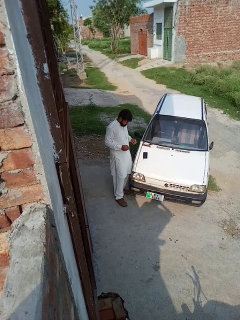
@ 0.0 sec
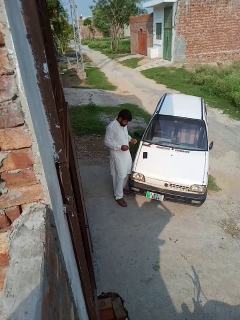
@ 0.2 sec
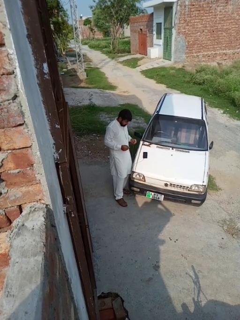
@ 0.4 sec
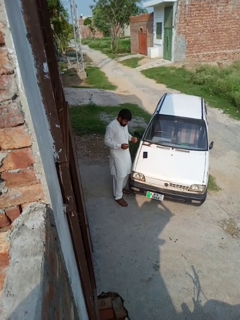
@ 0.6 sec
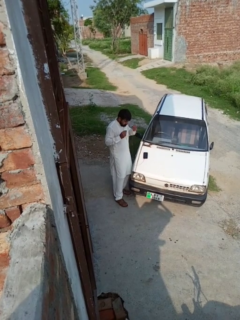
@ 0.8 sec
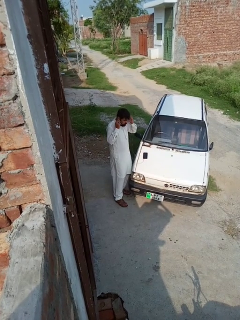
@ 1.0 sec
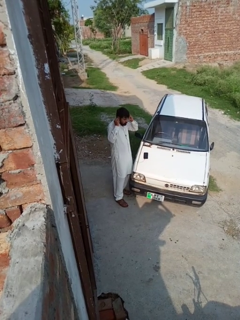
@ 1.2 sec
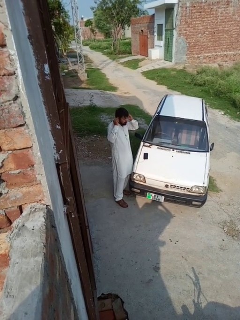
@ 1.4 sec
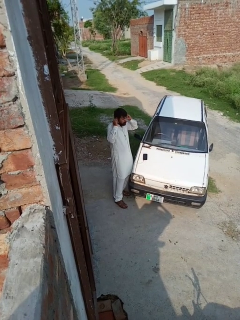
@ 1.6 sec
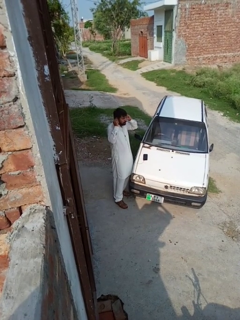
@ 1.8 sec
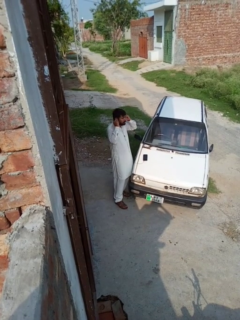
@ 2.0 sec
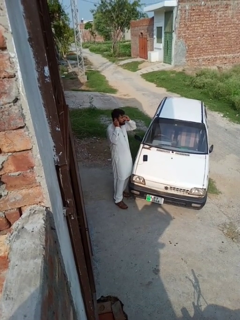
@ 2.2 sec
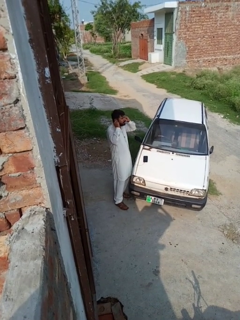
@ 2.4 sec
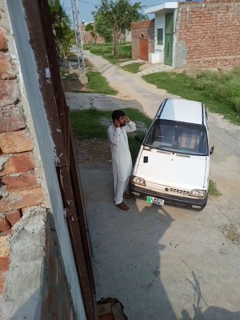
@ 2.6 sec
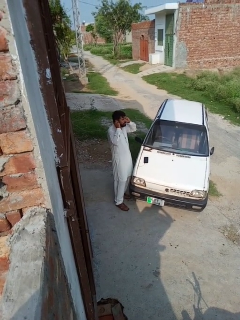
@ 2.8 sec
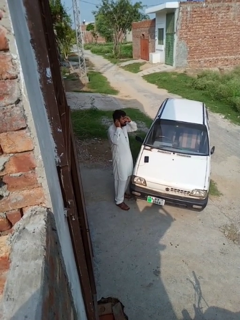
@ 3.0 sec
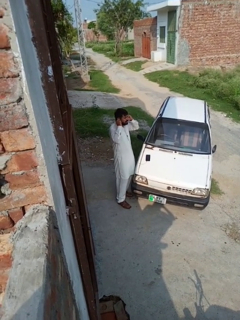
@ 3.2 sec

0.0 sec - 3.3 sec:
person puts on headphones

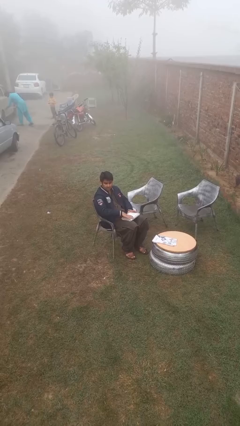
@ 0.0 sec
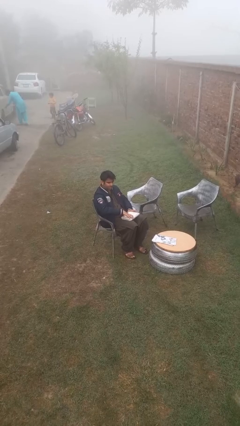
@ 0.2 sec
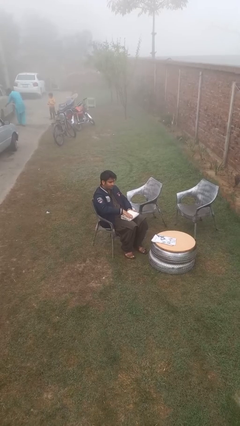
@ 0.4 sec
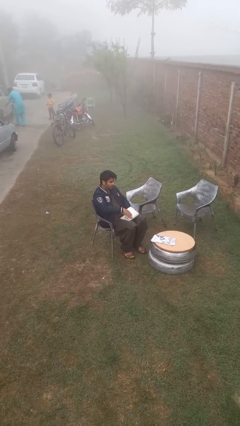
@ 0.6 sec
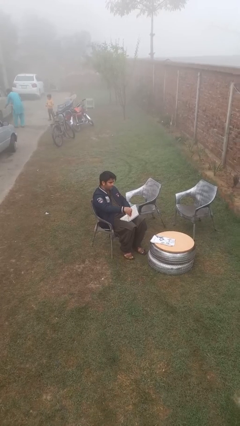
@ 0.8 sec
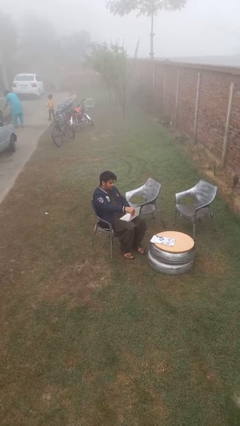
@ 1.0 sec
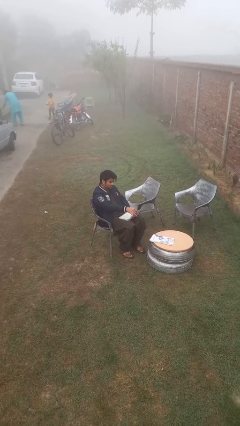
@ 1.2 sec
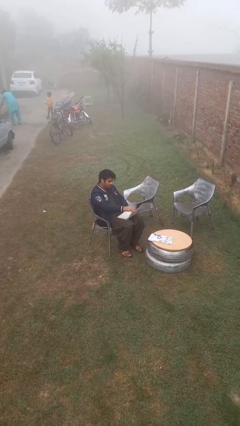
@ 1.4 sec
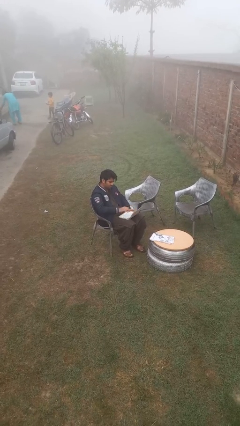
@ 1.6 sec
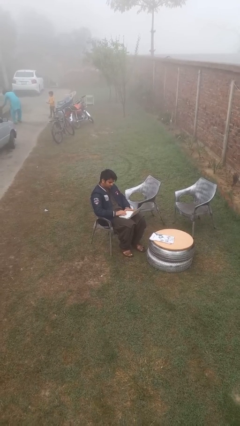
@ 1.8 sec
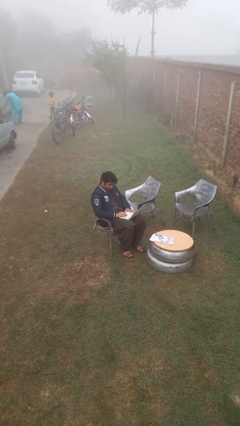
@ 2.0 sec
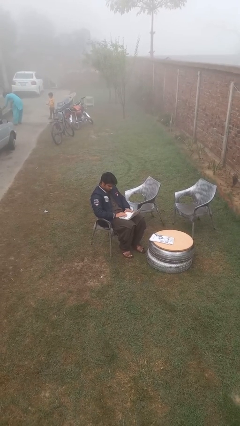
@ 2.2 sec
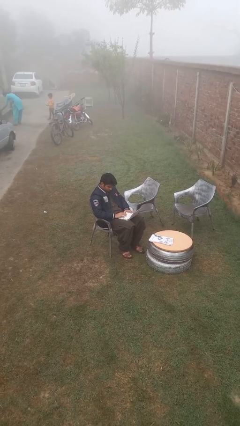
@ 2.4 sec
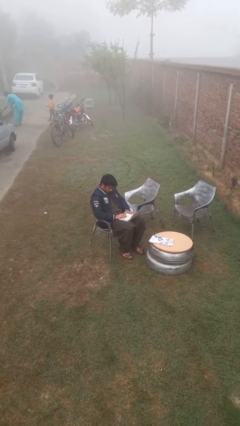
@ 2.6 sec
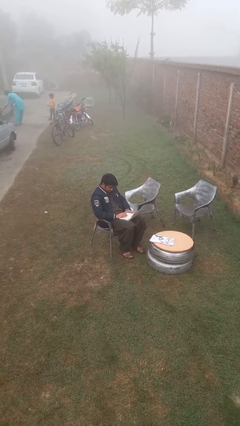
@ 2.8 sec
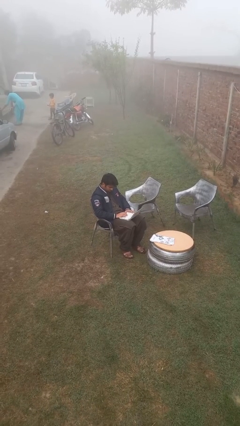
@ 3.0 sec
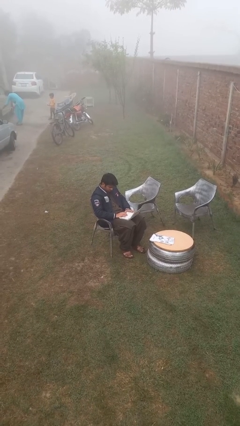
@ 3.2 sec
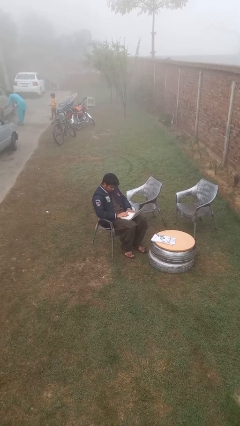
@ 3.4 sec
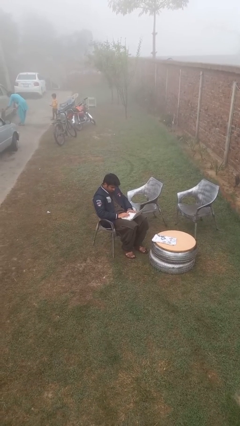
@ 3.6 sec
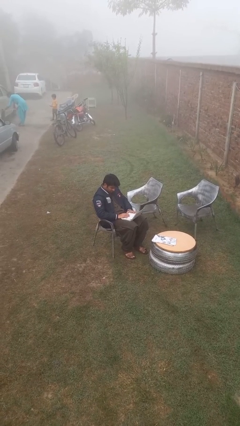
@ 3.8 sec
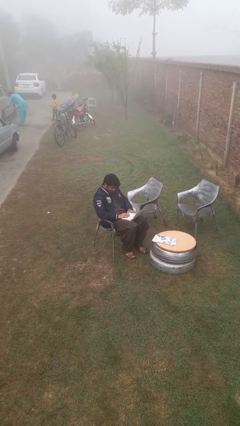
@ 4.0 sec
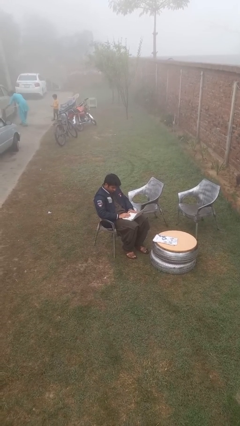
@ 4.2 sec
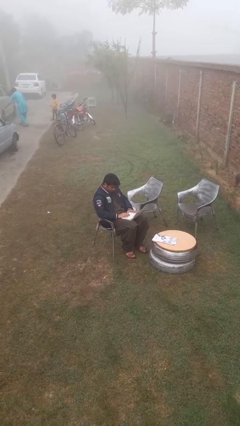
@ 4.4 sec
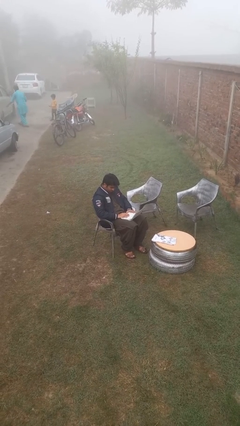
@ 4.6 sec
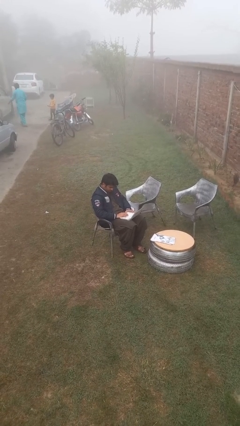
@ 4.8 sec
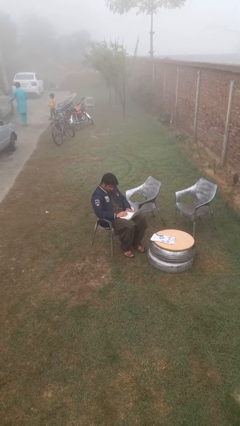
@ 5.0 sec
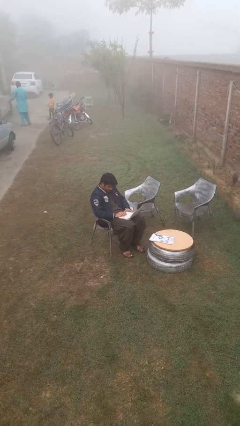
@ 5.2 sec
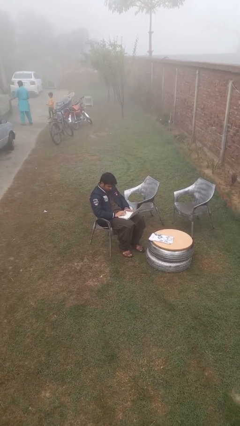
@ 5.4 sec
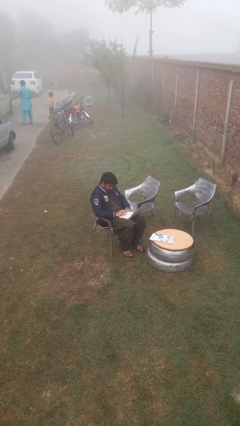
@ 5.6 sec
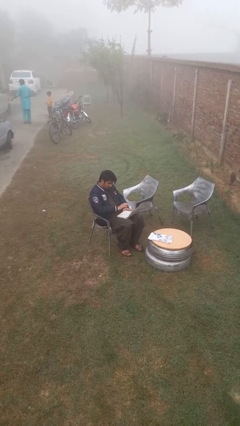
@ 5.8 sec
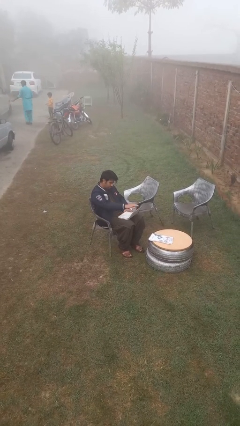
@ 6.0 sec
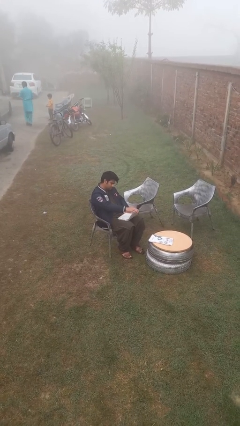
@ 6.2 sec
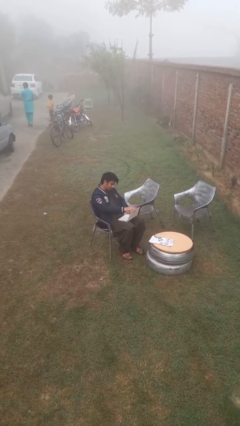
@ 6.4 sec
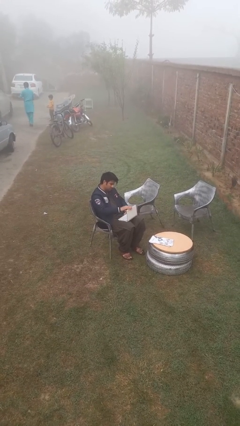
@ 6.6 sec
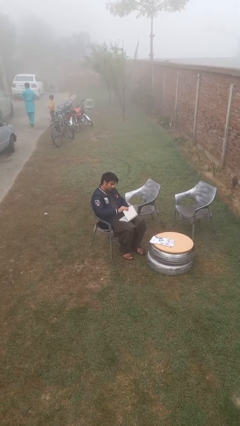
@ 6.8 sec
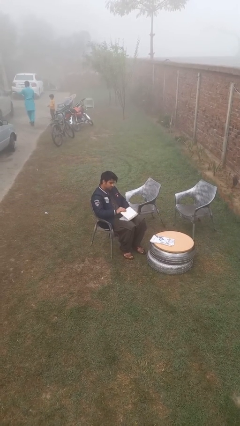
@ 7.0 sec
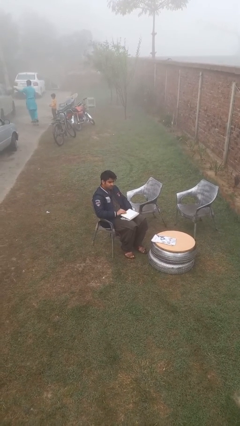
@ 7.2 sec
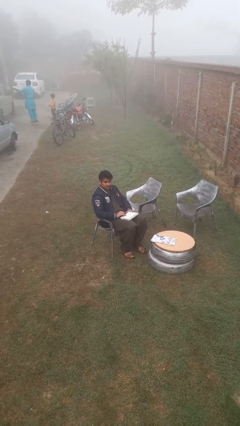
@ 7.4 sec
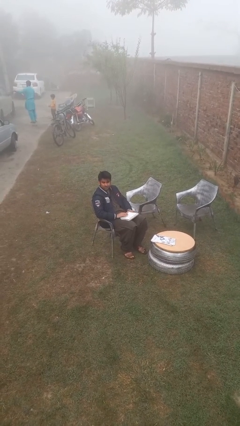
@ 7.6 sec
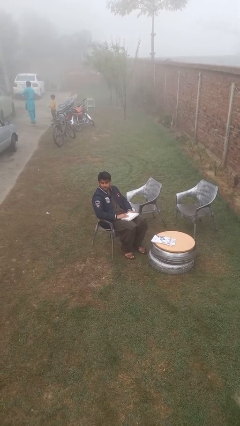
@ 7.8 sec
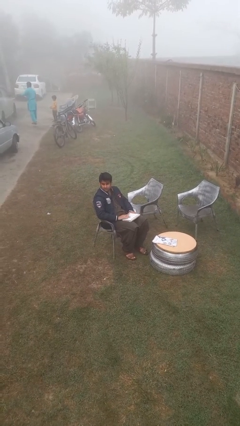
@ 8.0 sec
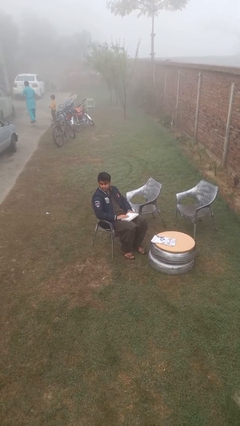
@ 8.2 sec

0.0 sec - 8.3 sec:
person interacts with laptop

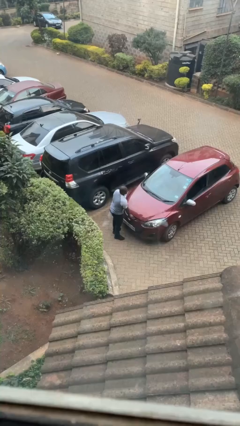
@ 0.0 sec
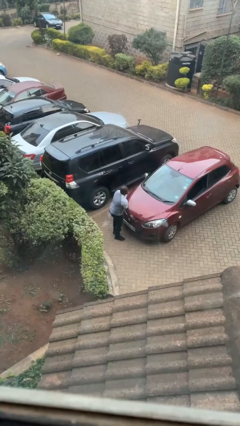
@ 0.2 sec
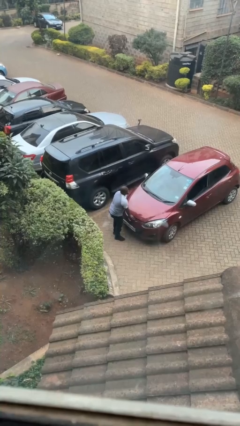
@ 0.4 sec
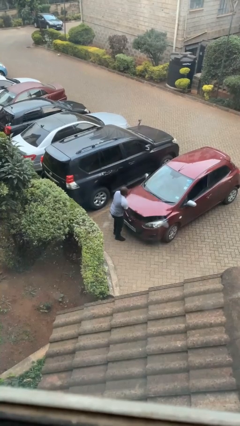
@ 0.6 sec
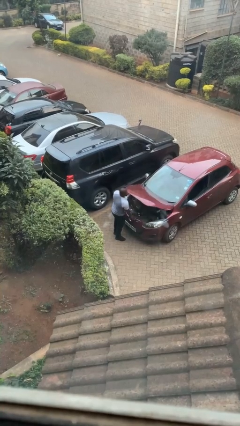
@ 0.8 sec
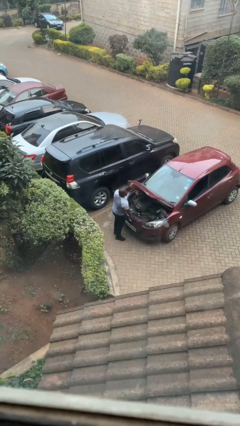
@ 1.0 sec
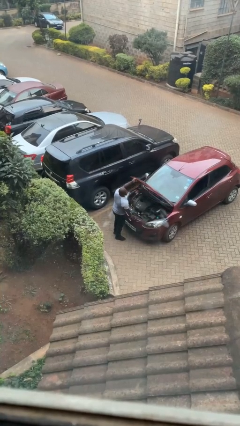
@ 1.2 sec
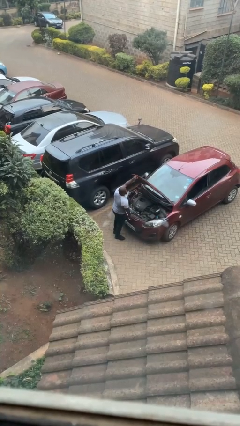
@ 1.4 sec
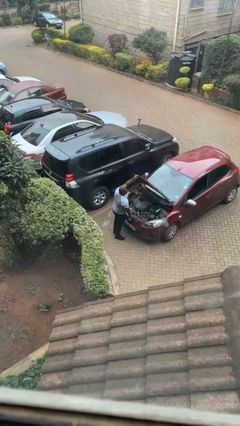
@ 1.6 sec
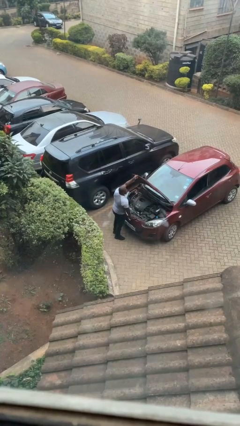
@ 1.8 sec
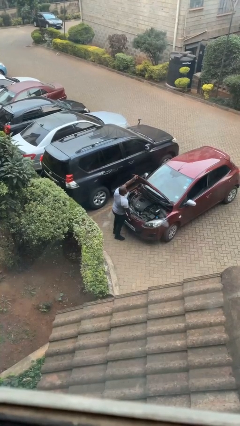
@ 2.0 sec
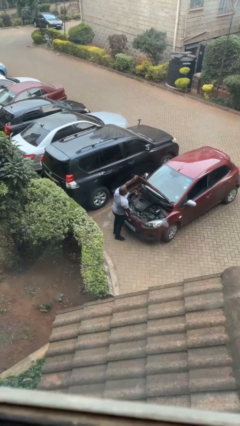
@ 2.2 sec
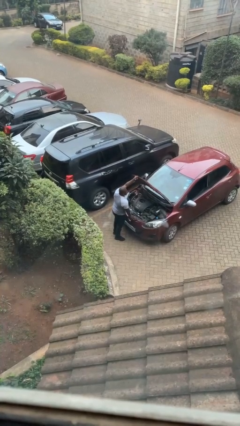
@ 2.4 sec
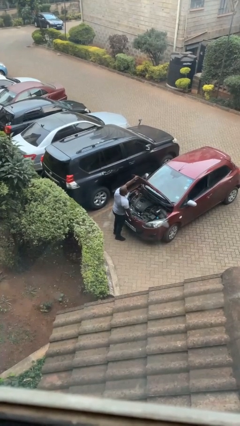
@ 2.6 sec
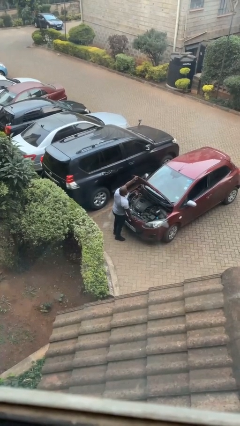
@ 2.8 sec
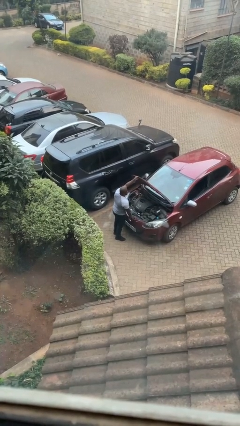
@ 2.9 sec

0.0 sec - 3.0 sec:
person opens car hood

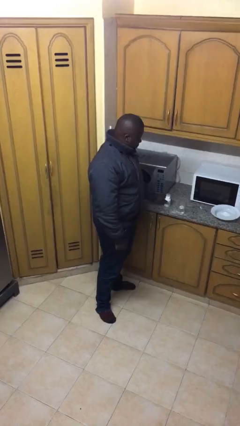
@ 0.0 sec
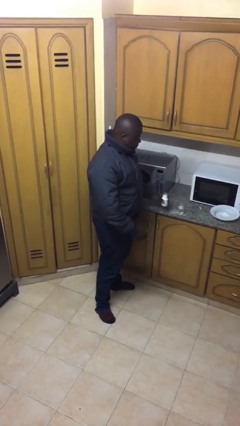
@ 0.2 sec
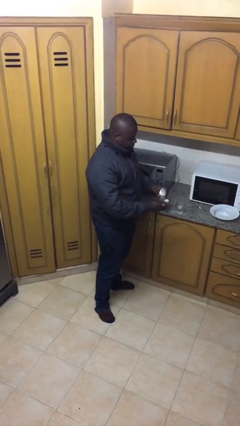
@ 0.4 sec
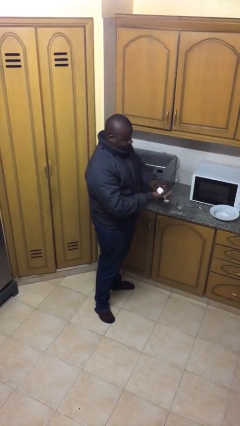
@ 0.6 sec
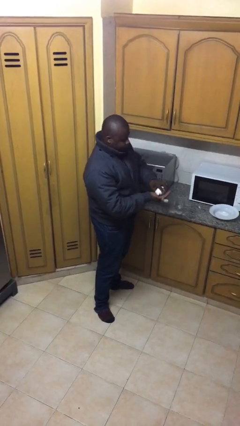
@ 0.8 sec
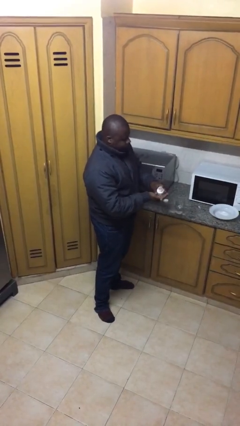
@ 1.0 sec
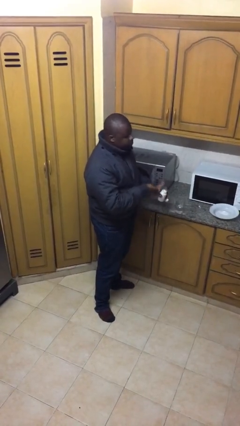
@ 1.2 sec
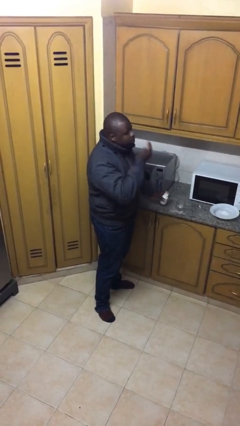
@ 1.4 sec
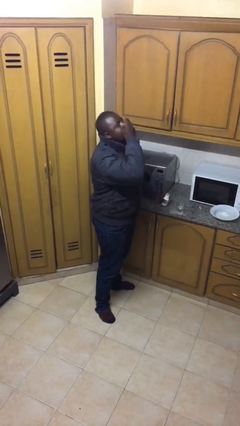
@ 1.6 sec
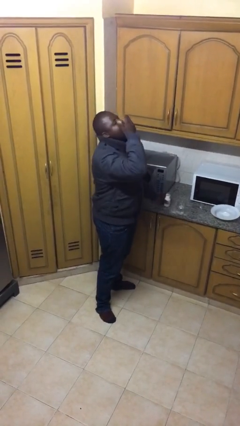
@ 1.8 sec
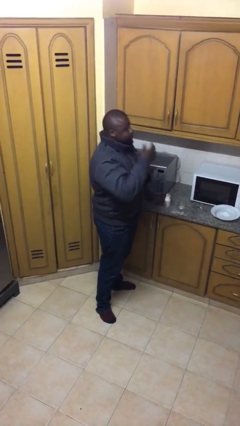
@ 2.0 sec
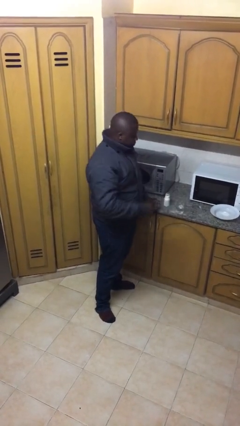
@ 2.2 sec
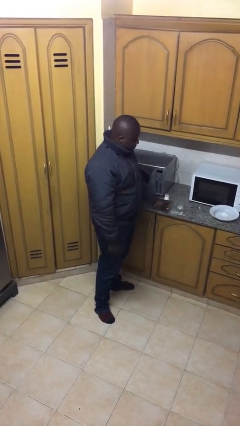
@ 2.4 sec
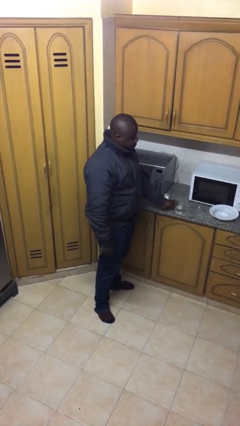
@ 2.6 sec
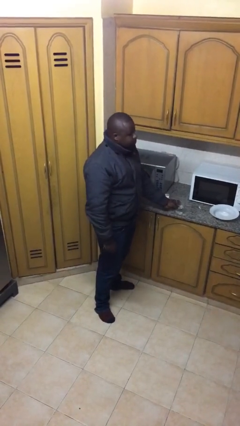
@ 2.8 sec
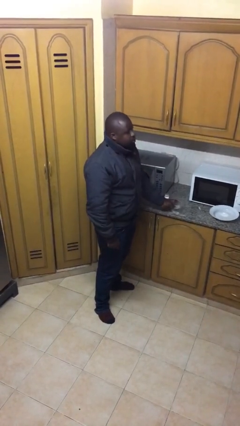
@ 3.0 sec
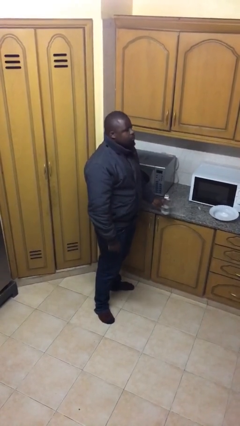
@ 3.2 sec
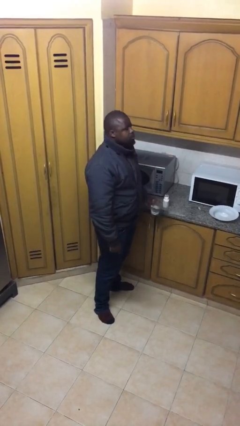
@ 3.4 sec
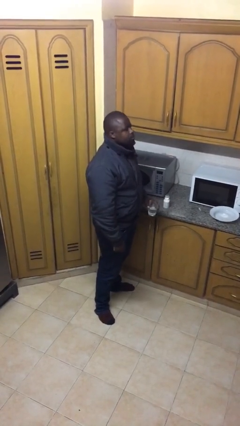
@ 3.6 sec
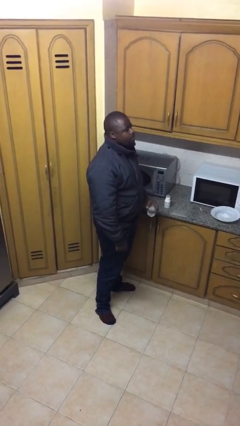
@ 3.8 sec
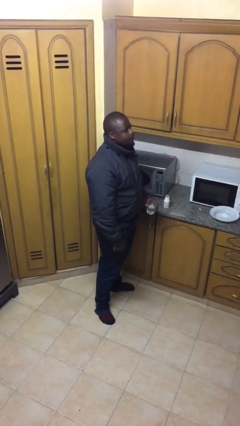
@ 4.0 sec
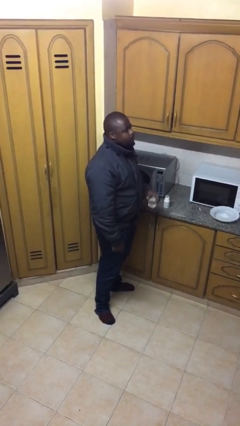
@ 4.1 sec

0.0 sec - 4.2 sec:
person takes medicine pills
